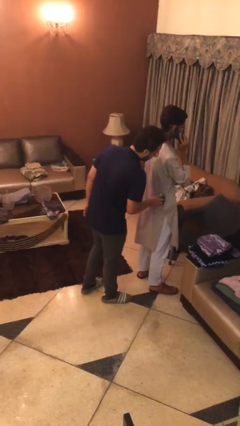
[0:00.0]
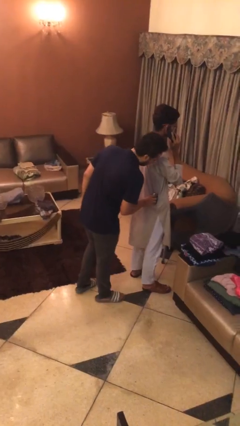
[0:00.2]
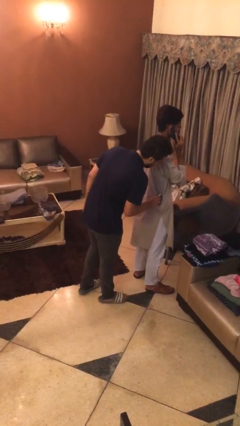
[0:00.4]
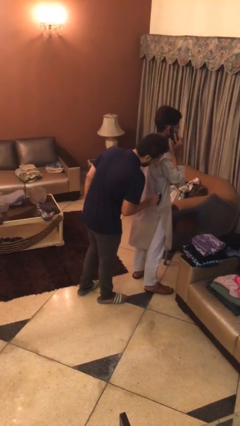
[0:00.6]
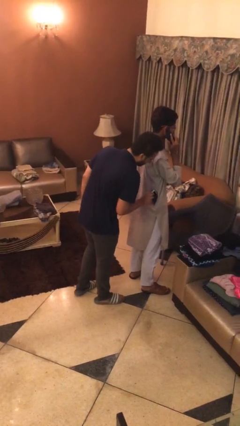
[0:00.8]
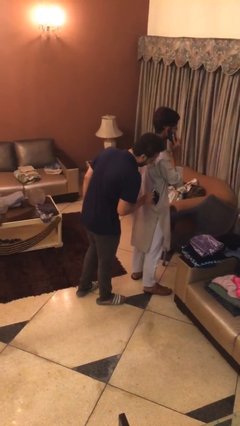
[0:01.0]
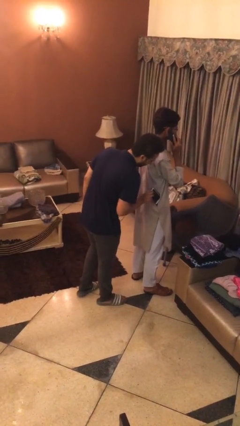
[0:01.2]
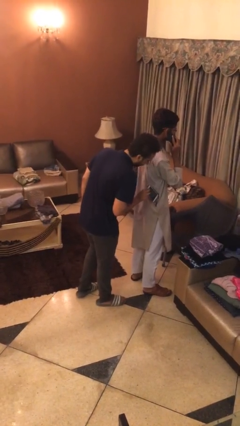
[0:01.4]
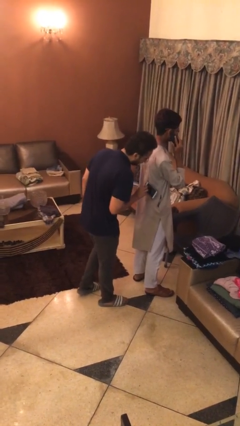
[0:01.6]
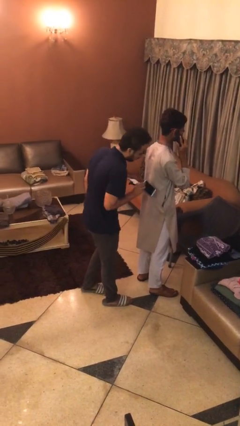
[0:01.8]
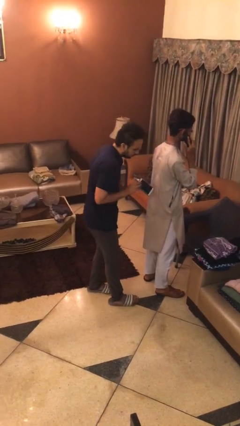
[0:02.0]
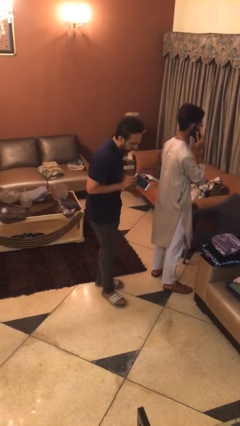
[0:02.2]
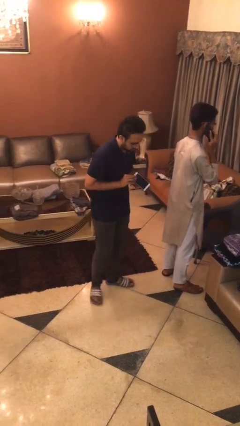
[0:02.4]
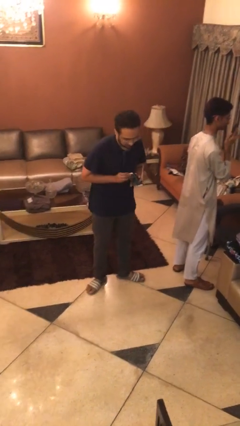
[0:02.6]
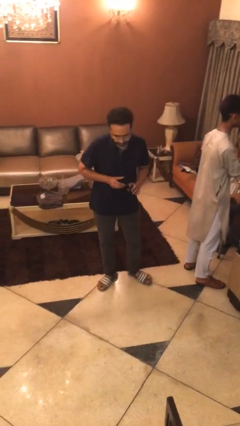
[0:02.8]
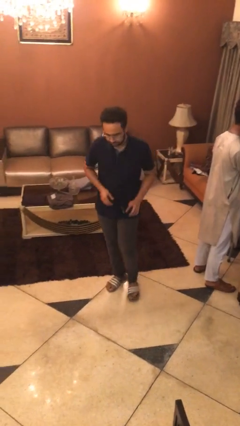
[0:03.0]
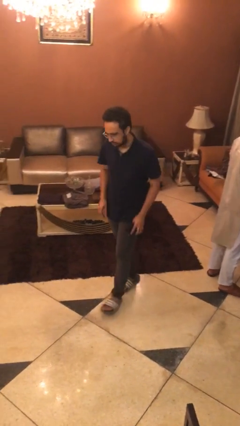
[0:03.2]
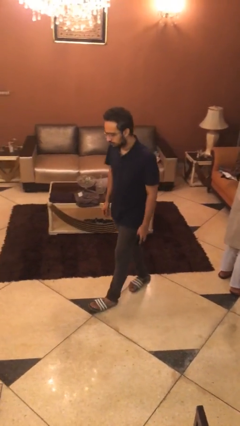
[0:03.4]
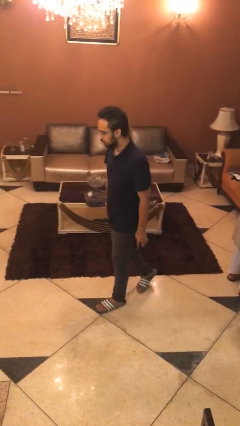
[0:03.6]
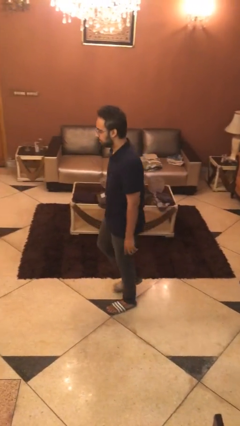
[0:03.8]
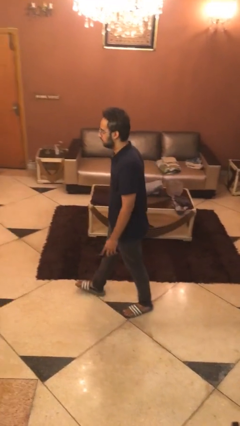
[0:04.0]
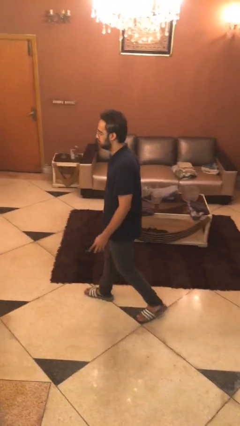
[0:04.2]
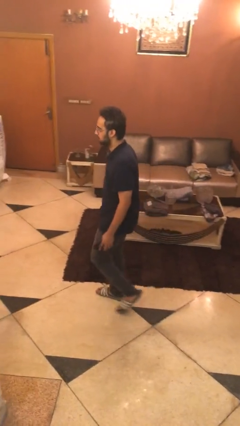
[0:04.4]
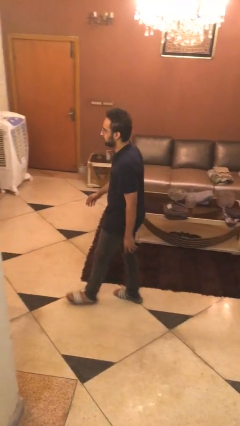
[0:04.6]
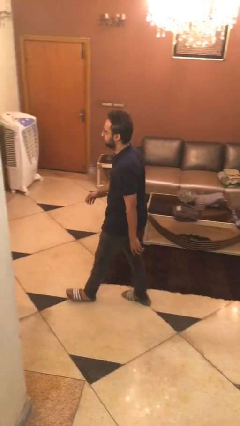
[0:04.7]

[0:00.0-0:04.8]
person steals object from person

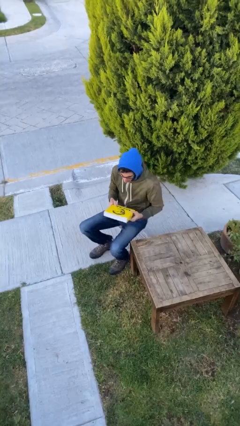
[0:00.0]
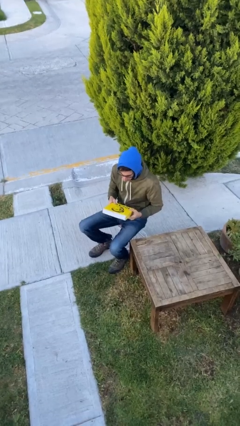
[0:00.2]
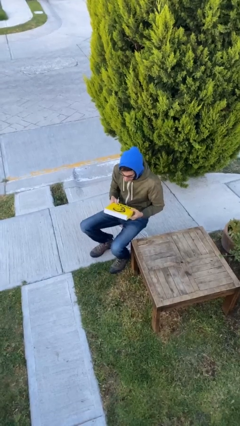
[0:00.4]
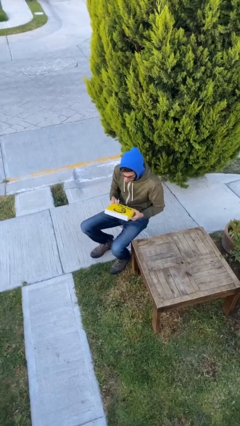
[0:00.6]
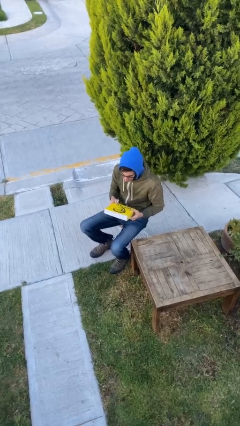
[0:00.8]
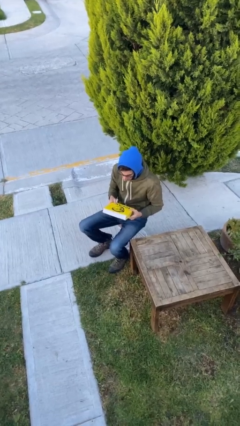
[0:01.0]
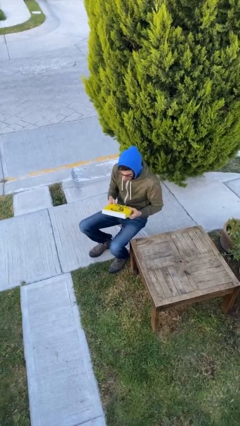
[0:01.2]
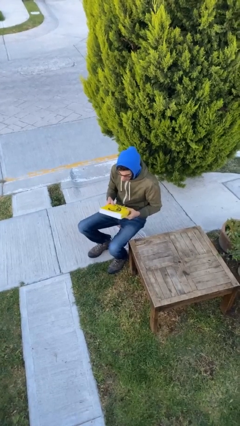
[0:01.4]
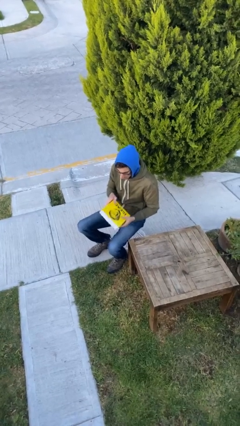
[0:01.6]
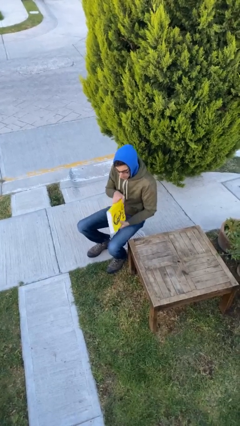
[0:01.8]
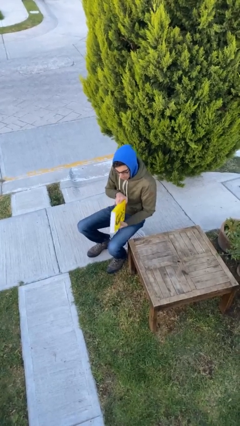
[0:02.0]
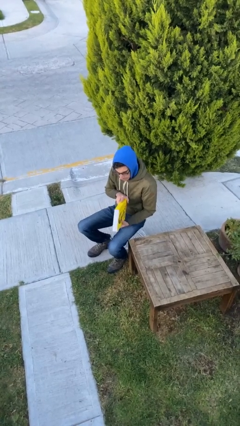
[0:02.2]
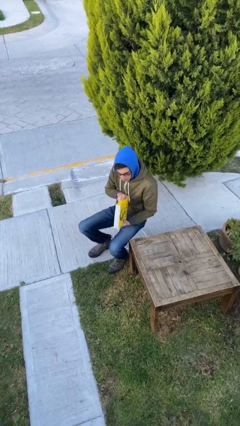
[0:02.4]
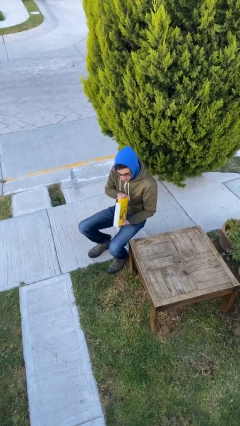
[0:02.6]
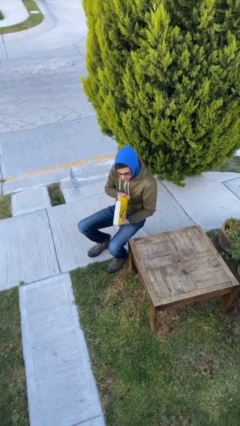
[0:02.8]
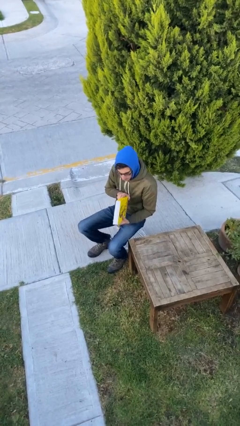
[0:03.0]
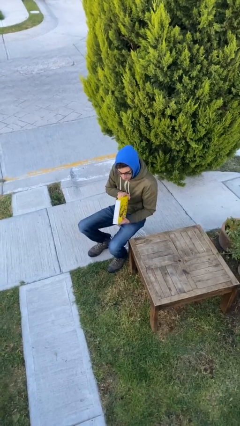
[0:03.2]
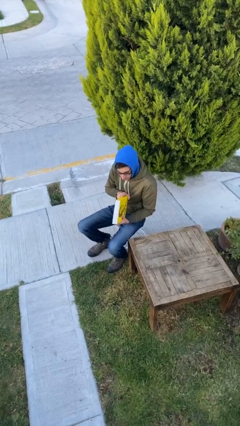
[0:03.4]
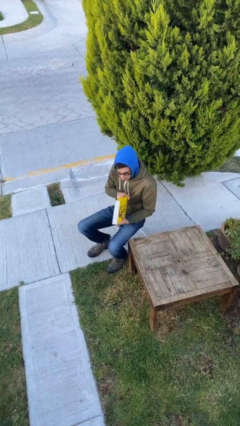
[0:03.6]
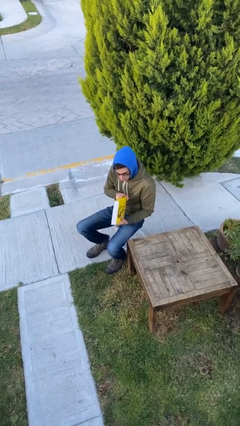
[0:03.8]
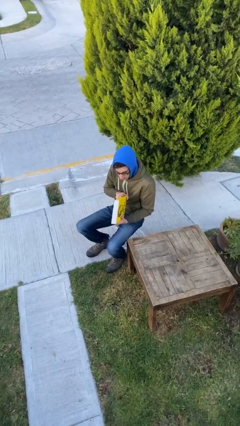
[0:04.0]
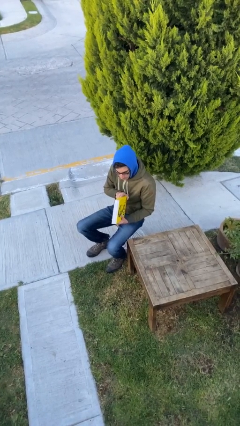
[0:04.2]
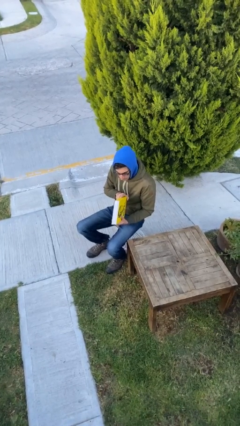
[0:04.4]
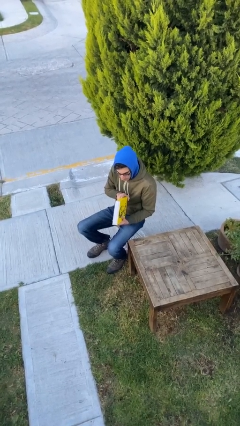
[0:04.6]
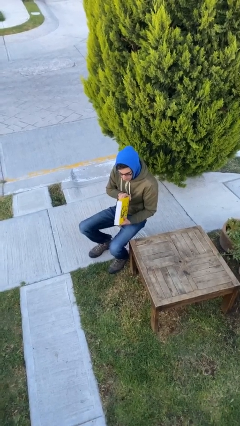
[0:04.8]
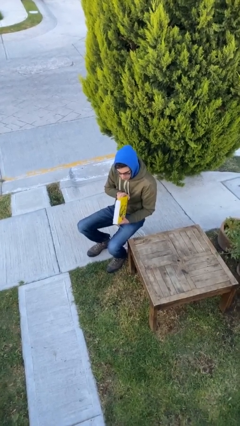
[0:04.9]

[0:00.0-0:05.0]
person reads document

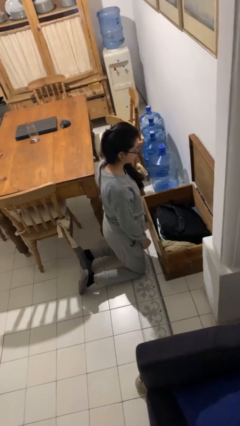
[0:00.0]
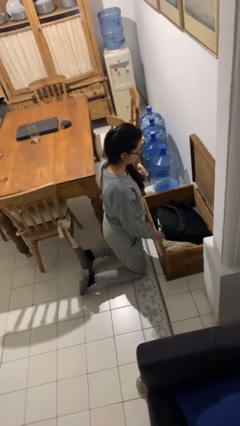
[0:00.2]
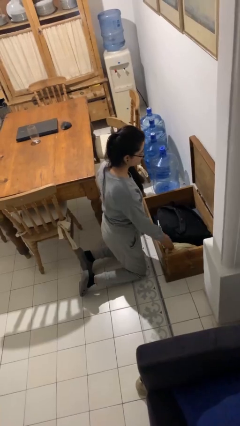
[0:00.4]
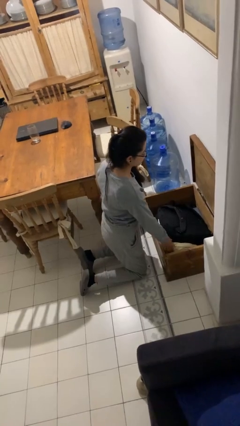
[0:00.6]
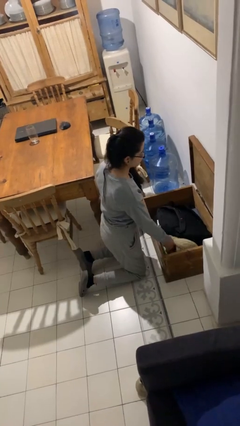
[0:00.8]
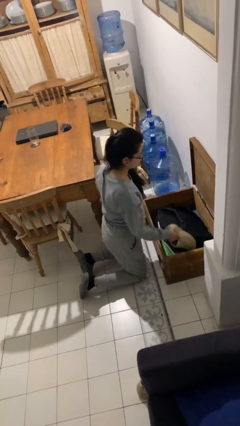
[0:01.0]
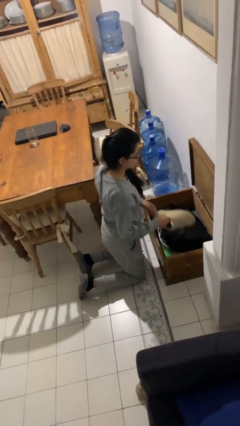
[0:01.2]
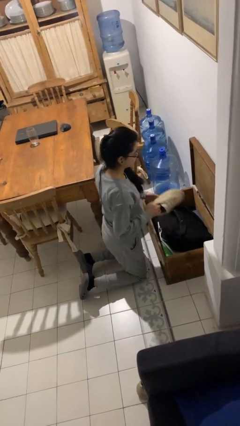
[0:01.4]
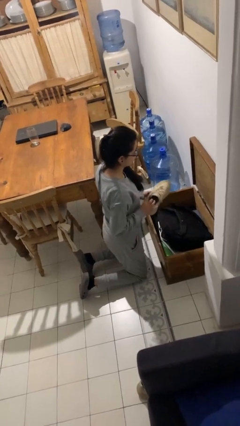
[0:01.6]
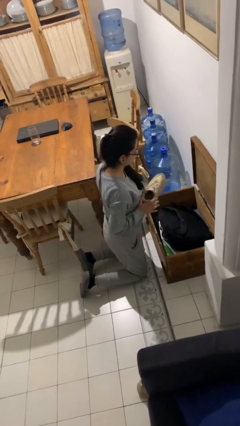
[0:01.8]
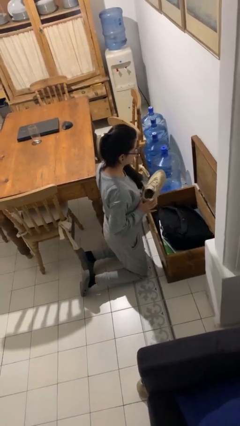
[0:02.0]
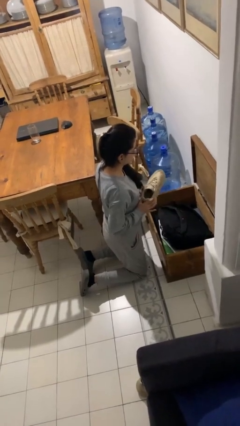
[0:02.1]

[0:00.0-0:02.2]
person takes object from box

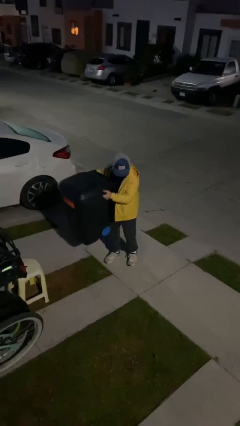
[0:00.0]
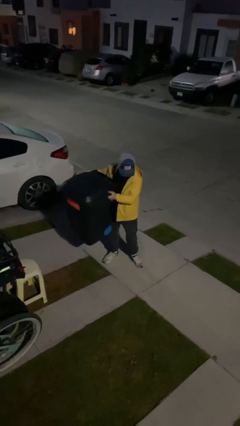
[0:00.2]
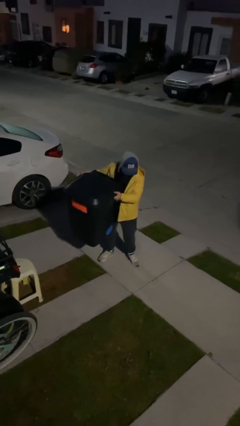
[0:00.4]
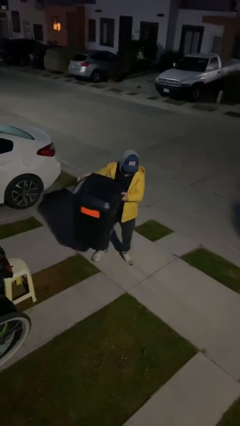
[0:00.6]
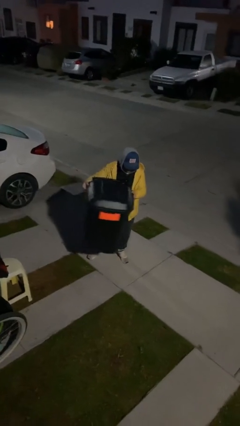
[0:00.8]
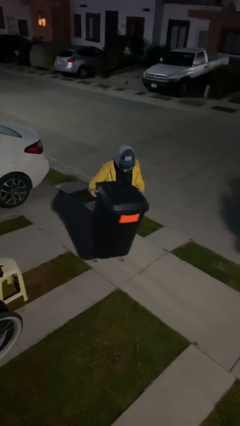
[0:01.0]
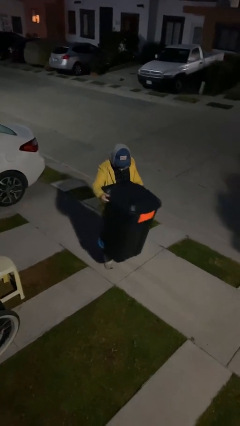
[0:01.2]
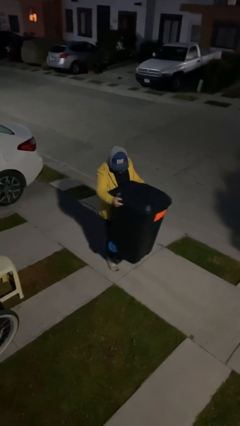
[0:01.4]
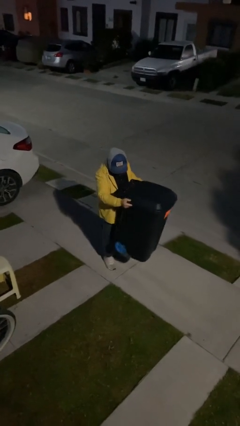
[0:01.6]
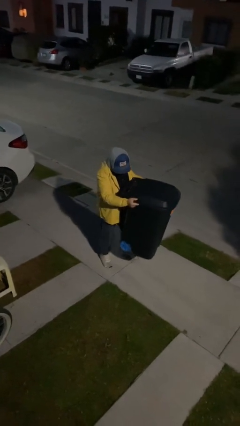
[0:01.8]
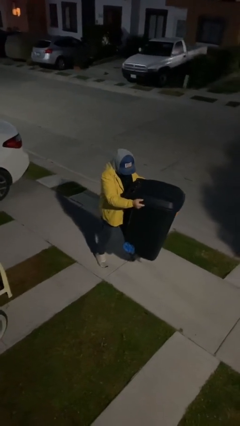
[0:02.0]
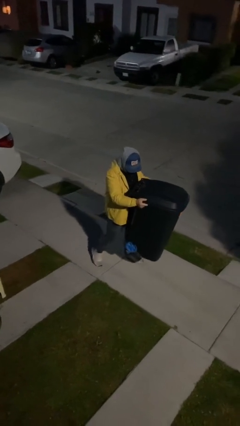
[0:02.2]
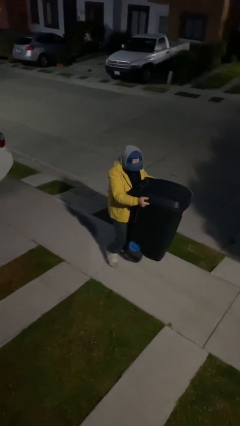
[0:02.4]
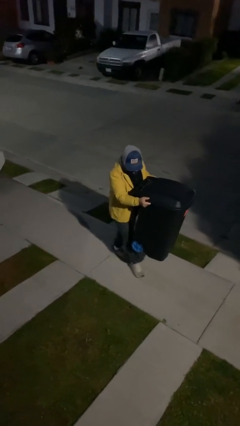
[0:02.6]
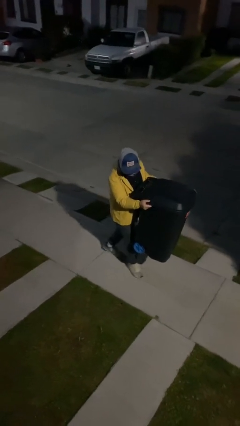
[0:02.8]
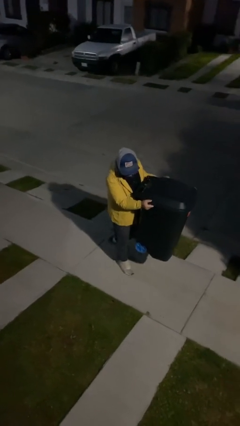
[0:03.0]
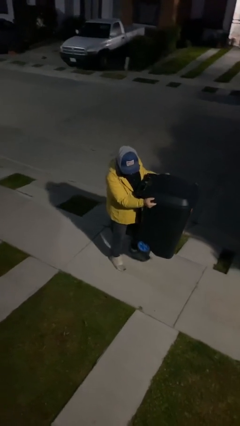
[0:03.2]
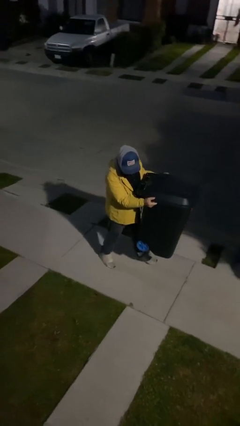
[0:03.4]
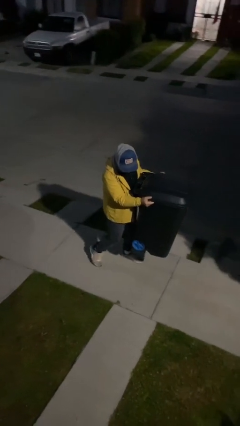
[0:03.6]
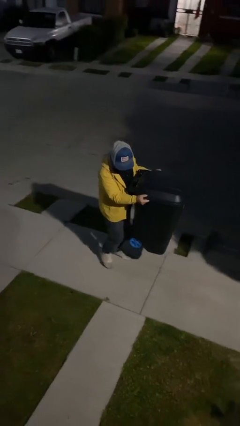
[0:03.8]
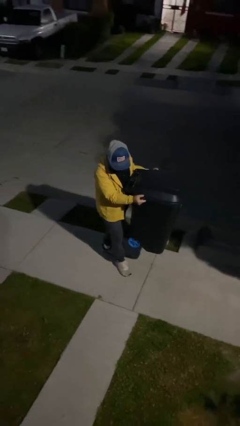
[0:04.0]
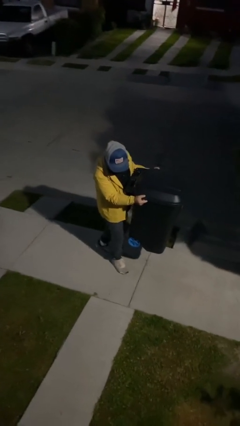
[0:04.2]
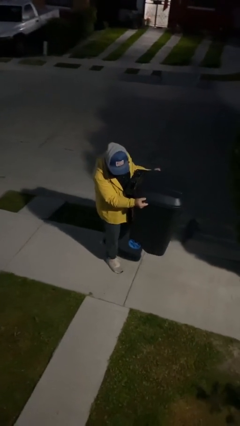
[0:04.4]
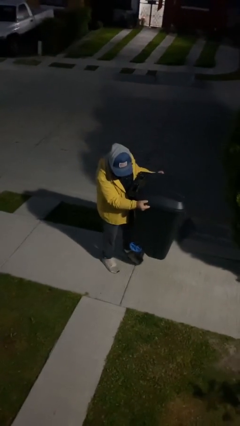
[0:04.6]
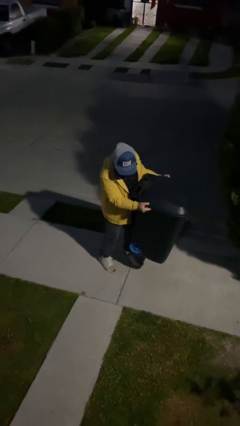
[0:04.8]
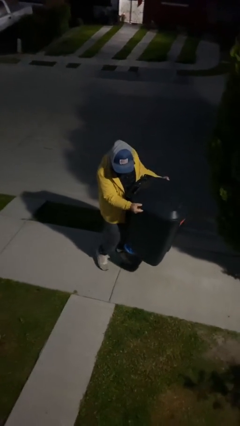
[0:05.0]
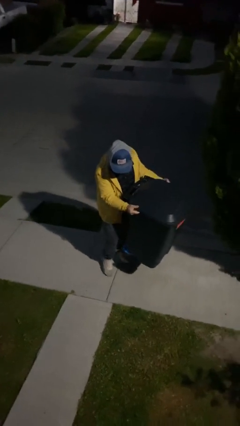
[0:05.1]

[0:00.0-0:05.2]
person carries heavy object

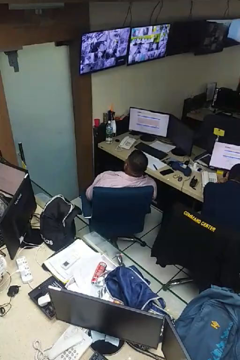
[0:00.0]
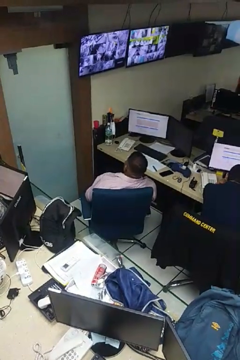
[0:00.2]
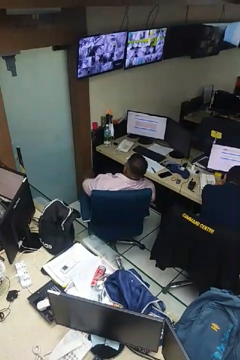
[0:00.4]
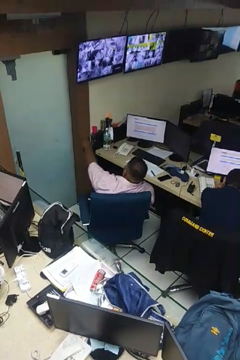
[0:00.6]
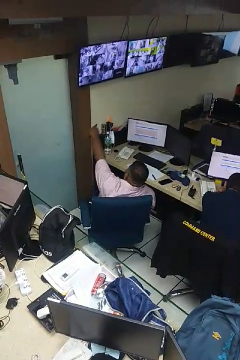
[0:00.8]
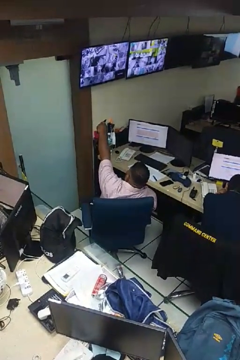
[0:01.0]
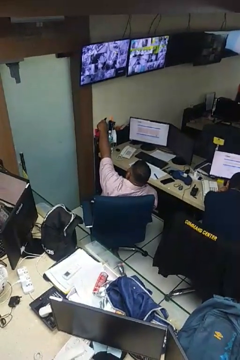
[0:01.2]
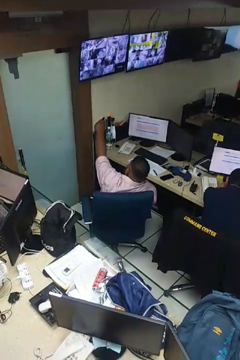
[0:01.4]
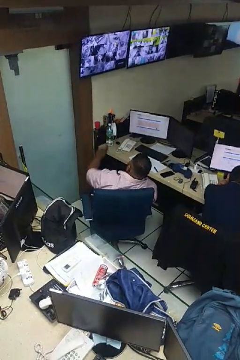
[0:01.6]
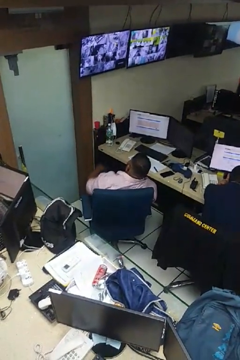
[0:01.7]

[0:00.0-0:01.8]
person uses television remote
